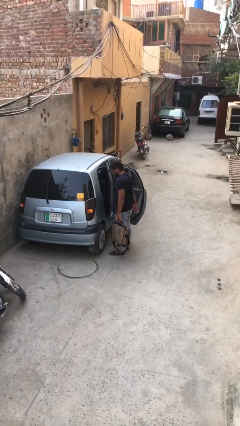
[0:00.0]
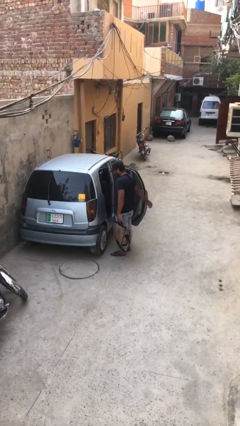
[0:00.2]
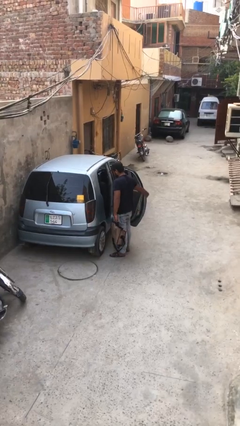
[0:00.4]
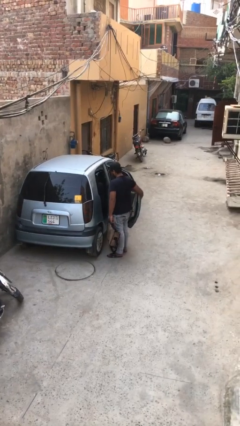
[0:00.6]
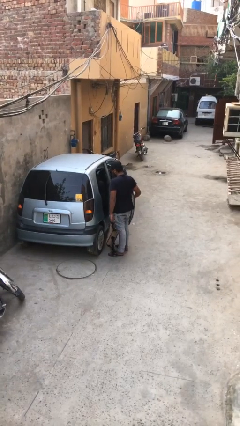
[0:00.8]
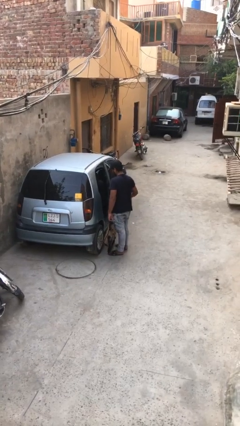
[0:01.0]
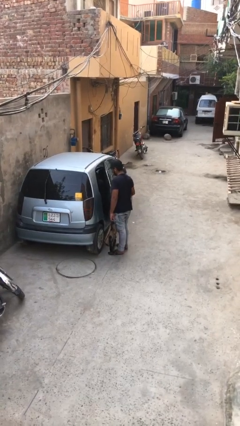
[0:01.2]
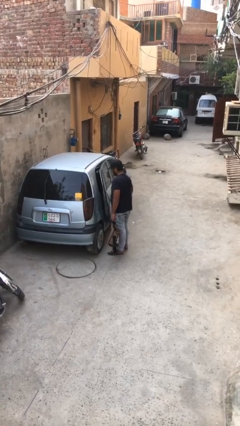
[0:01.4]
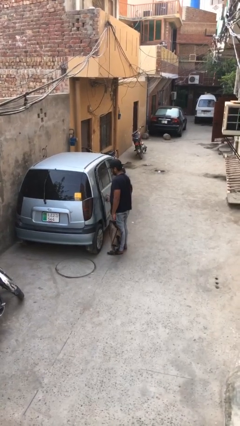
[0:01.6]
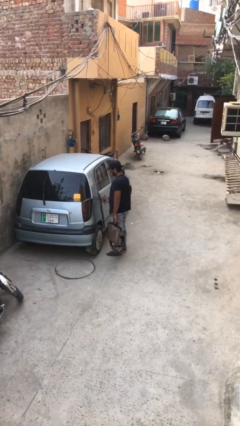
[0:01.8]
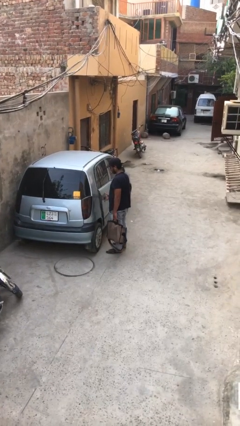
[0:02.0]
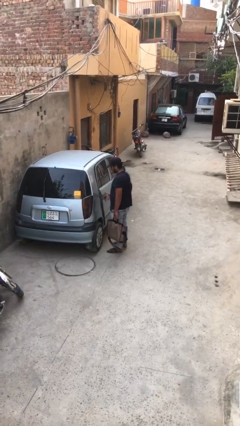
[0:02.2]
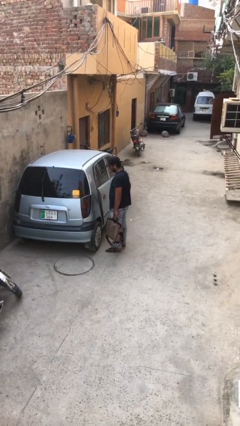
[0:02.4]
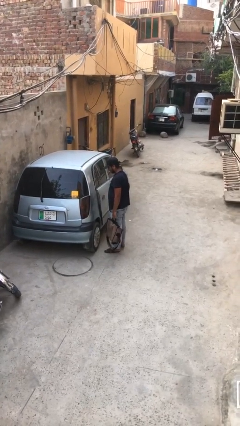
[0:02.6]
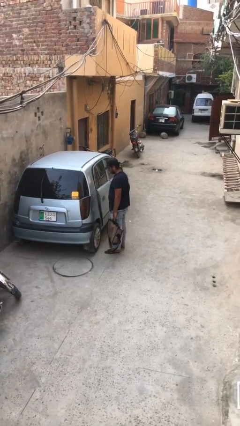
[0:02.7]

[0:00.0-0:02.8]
person closes car door

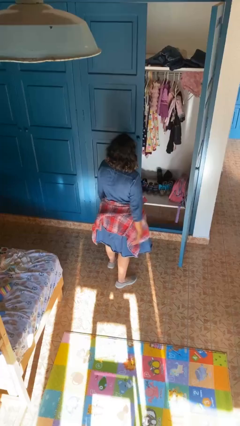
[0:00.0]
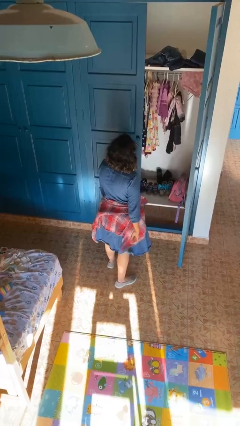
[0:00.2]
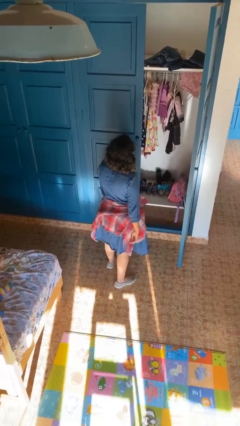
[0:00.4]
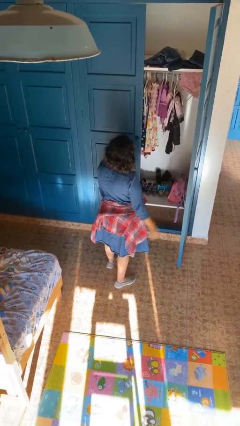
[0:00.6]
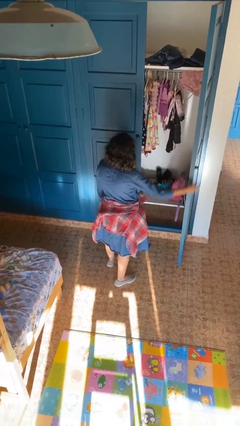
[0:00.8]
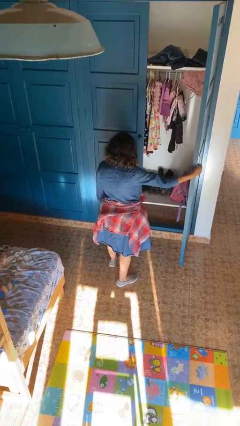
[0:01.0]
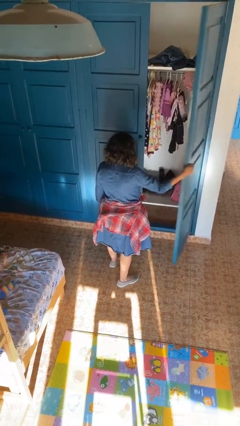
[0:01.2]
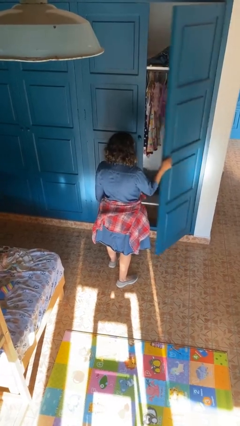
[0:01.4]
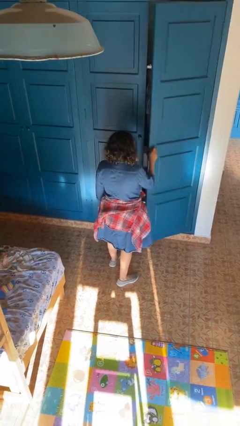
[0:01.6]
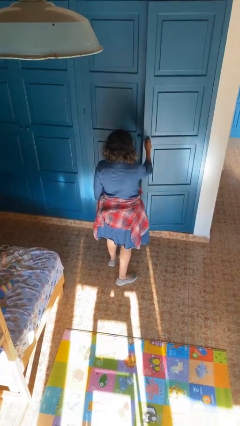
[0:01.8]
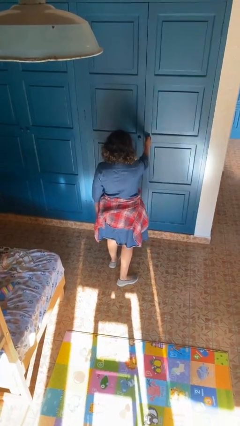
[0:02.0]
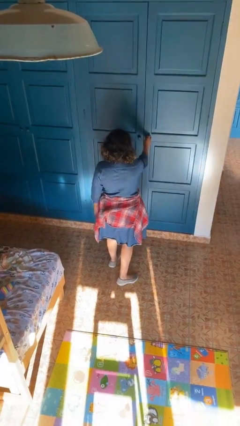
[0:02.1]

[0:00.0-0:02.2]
person closes closet door

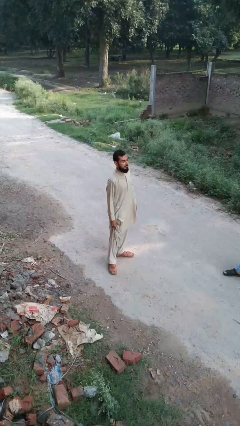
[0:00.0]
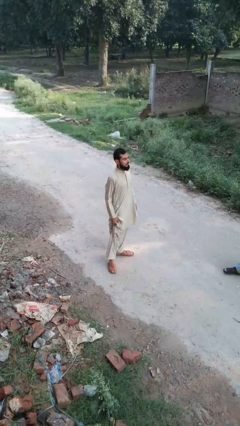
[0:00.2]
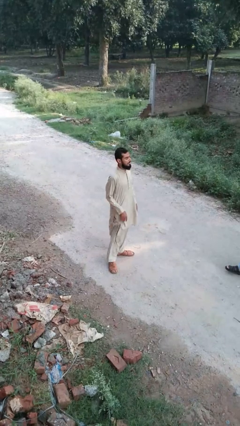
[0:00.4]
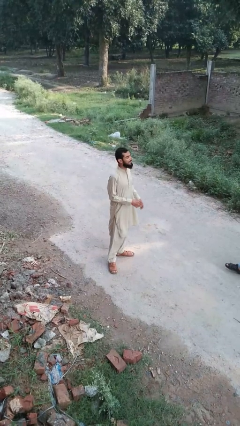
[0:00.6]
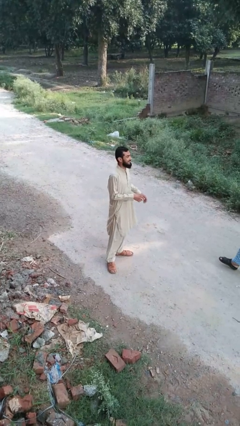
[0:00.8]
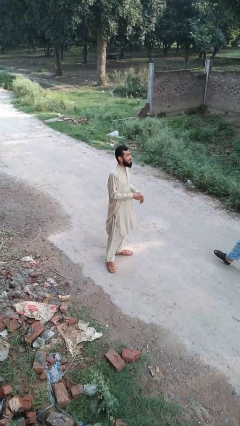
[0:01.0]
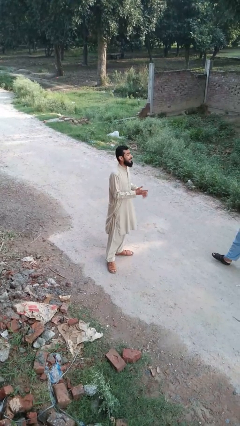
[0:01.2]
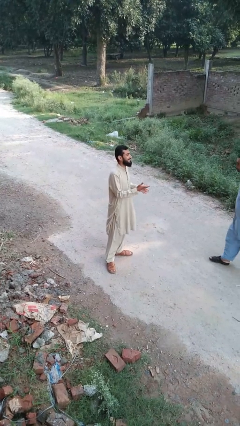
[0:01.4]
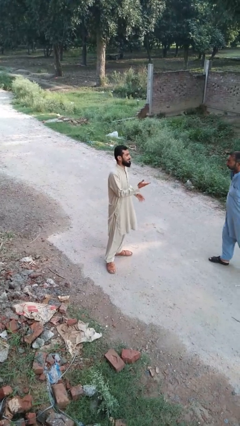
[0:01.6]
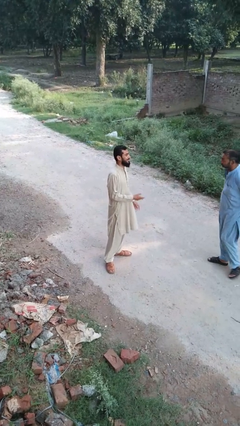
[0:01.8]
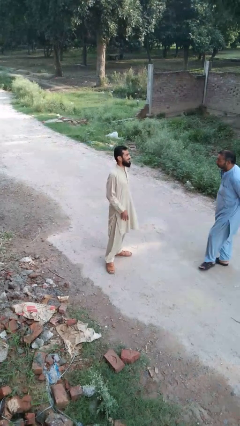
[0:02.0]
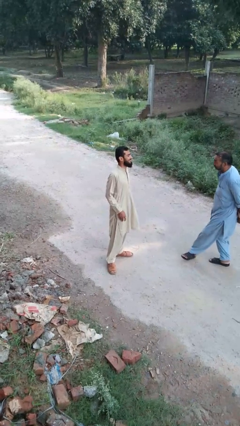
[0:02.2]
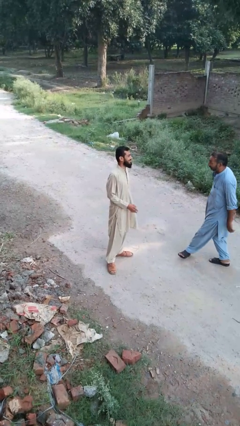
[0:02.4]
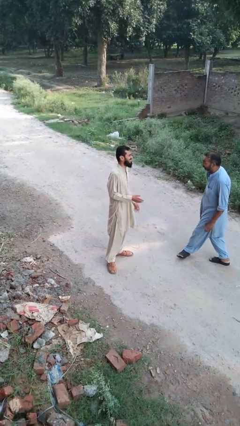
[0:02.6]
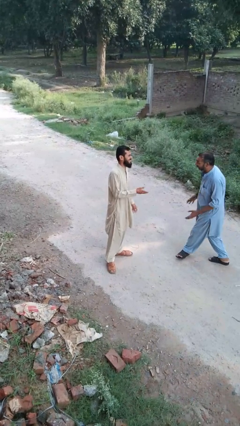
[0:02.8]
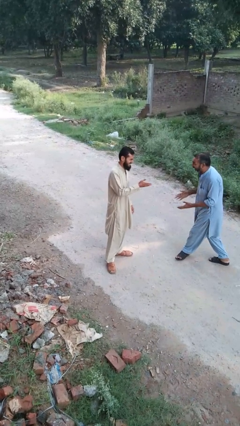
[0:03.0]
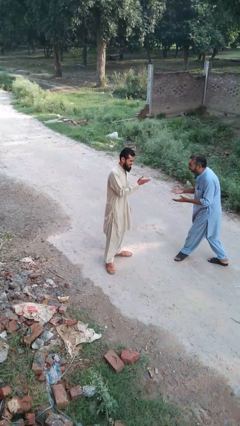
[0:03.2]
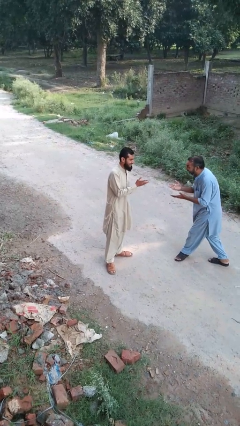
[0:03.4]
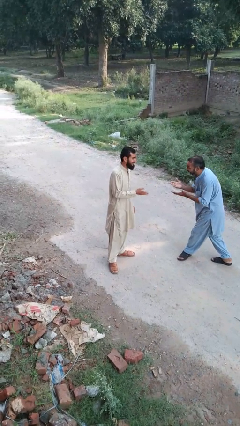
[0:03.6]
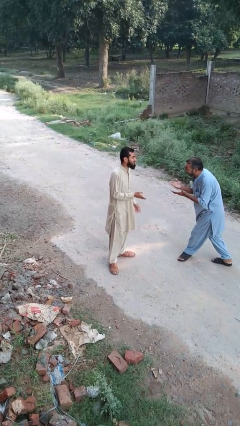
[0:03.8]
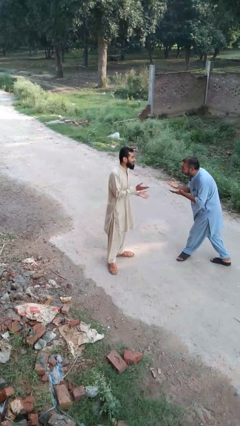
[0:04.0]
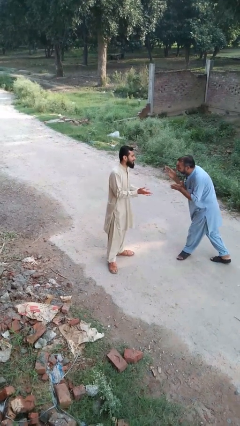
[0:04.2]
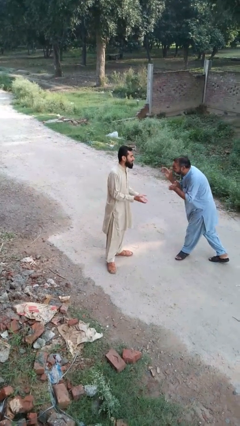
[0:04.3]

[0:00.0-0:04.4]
person laughs with person

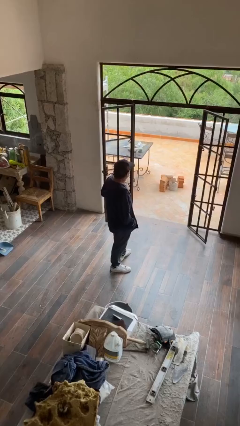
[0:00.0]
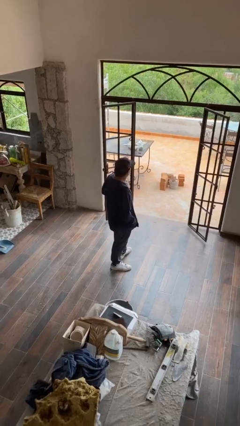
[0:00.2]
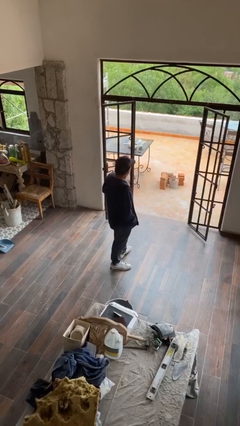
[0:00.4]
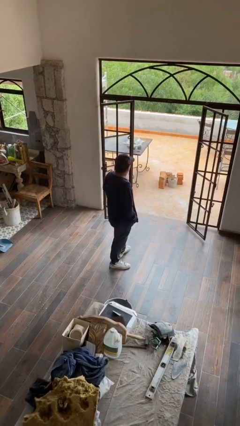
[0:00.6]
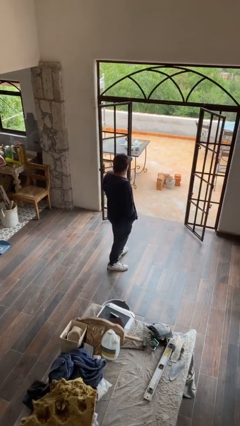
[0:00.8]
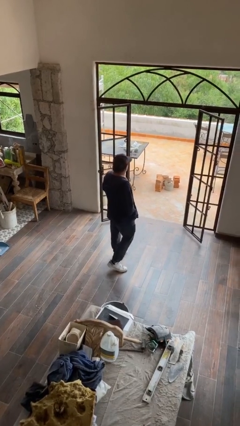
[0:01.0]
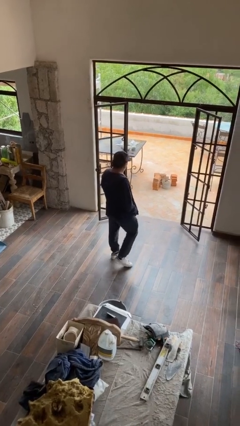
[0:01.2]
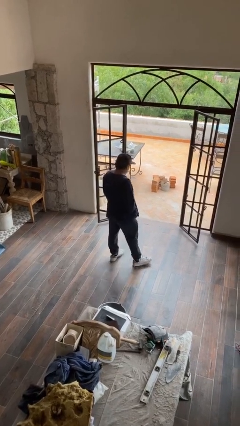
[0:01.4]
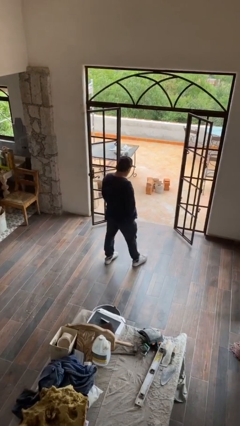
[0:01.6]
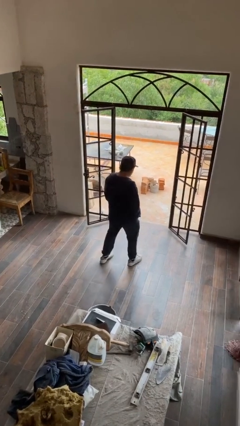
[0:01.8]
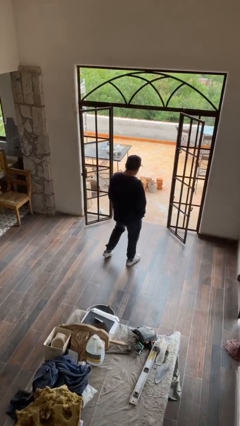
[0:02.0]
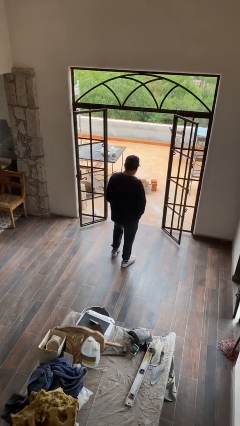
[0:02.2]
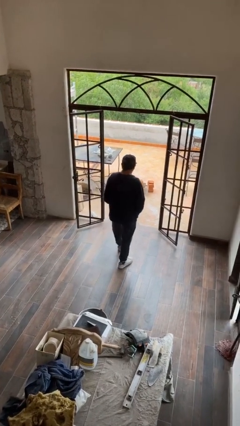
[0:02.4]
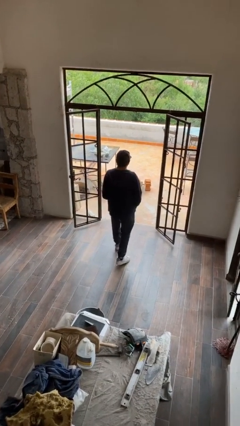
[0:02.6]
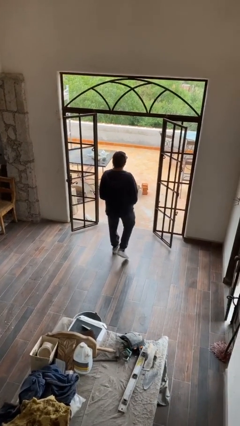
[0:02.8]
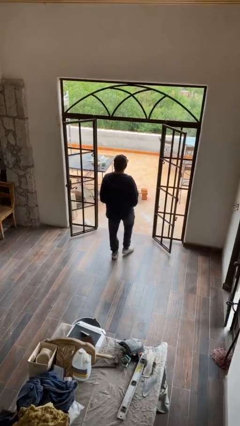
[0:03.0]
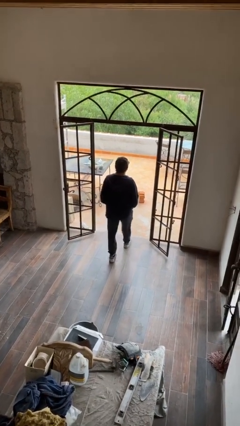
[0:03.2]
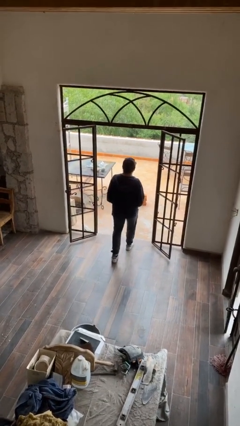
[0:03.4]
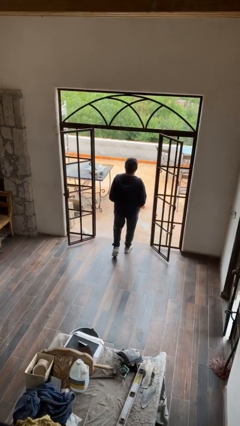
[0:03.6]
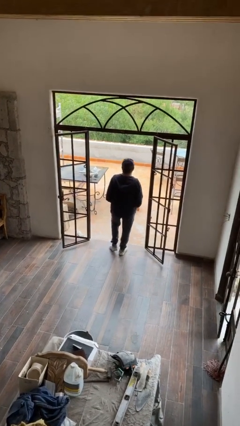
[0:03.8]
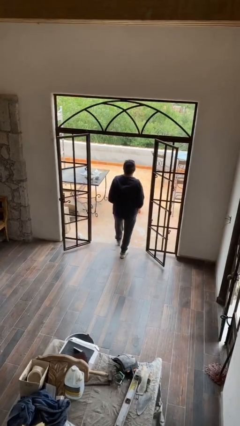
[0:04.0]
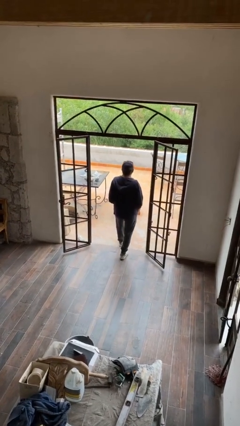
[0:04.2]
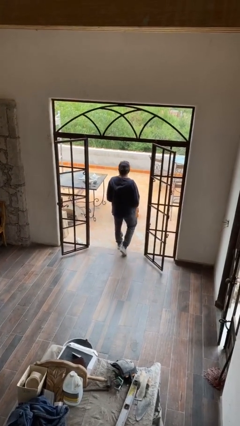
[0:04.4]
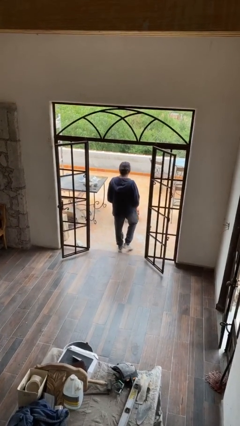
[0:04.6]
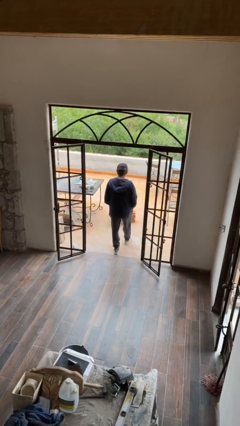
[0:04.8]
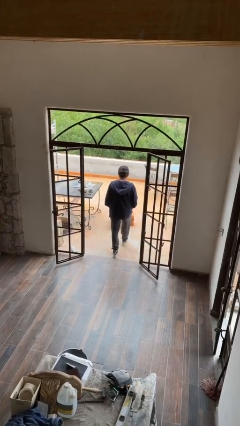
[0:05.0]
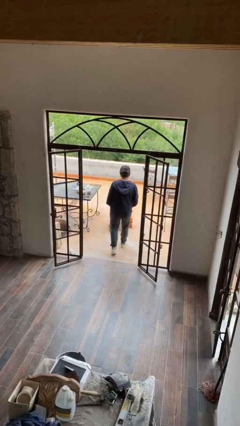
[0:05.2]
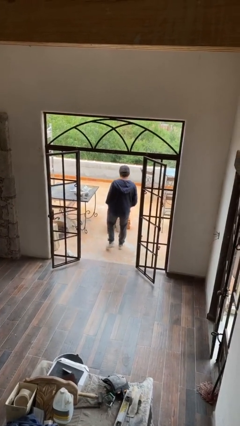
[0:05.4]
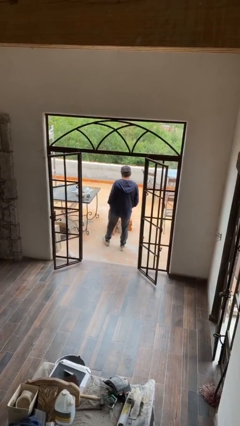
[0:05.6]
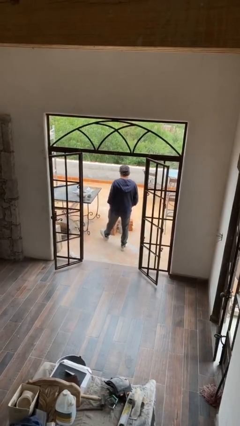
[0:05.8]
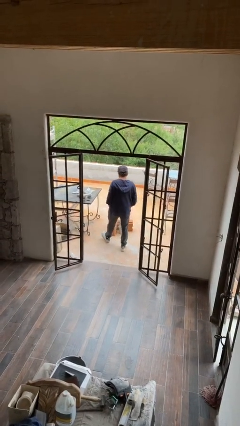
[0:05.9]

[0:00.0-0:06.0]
person exits scene through structure

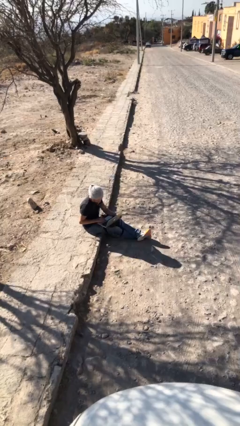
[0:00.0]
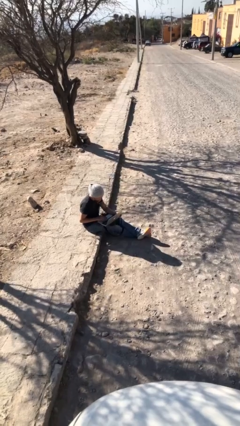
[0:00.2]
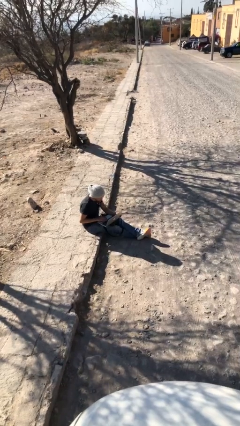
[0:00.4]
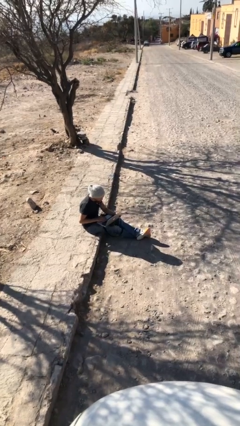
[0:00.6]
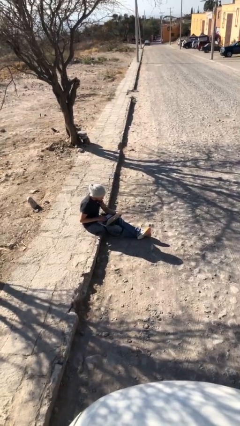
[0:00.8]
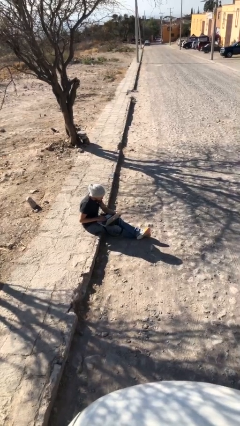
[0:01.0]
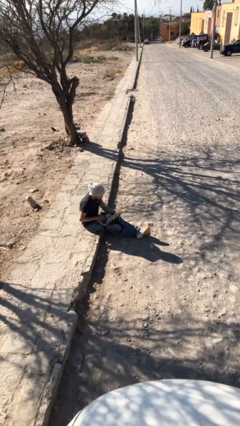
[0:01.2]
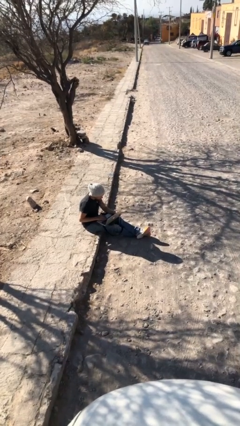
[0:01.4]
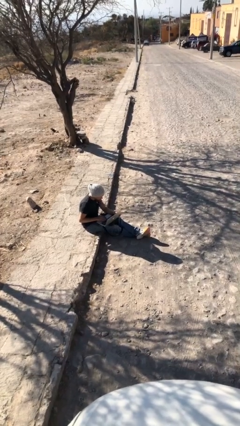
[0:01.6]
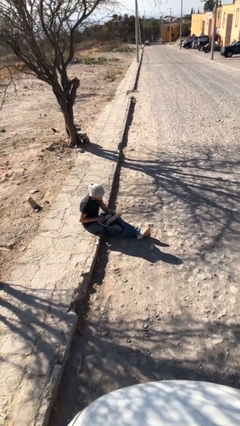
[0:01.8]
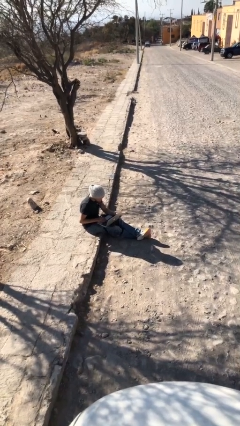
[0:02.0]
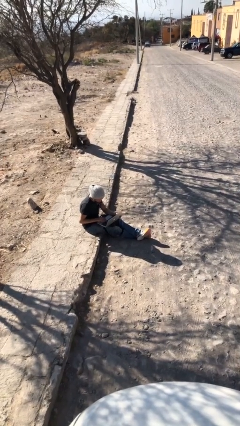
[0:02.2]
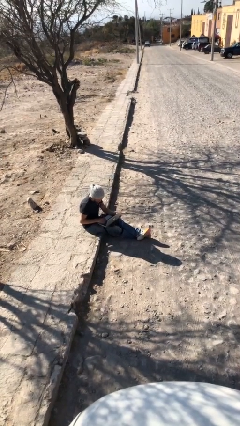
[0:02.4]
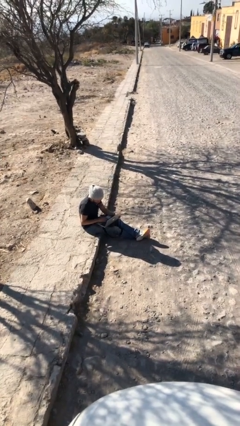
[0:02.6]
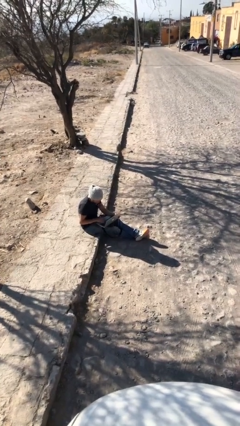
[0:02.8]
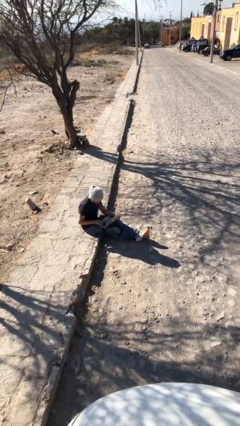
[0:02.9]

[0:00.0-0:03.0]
person interacts with laptop
